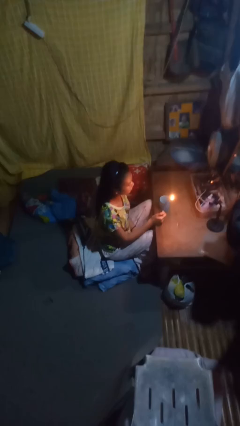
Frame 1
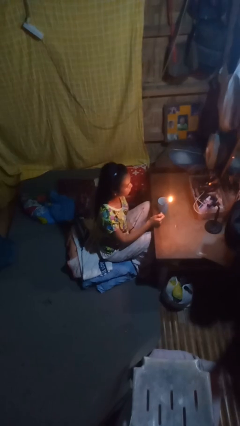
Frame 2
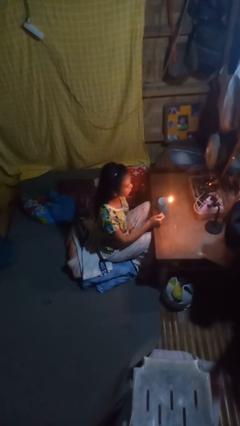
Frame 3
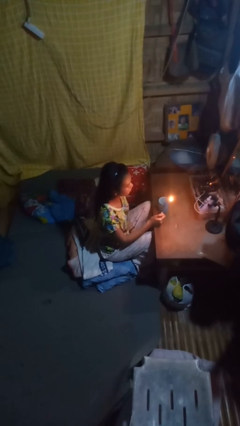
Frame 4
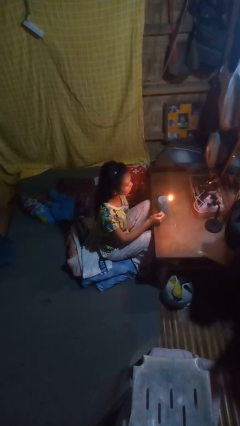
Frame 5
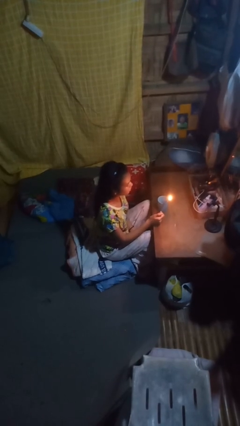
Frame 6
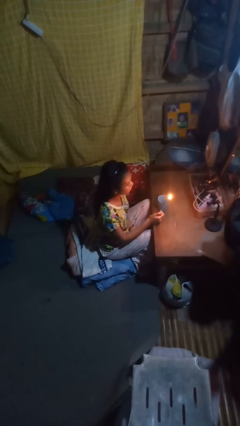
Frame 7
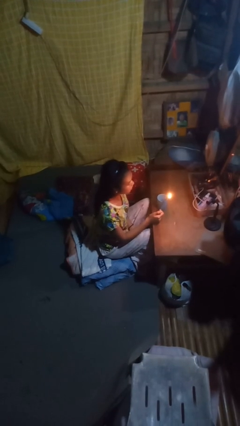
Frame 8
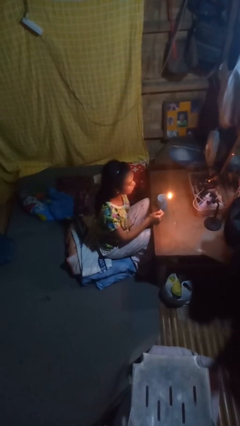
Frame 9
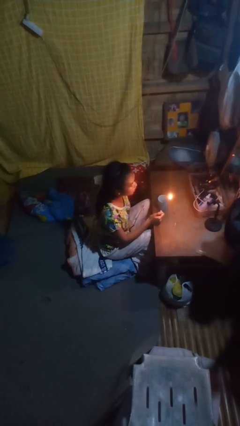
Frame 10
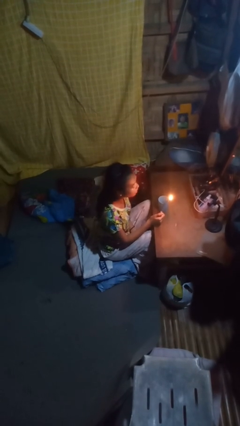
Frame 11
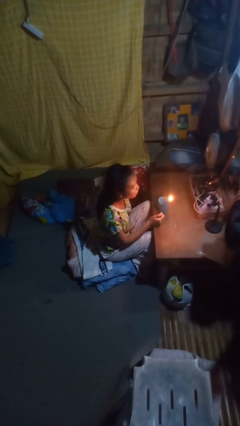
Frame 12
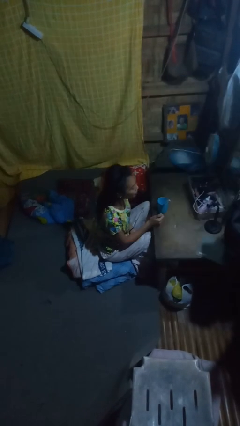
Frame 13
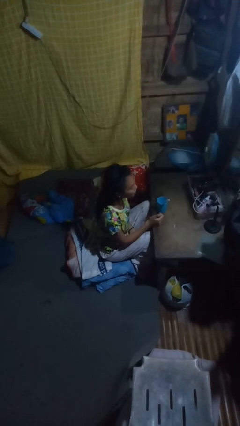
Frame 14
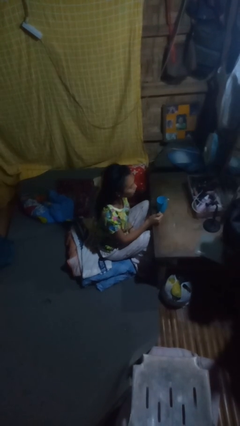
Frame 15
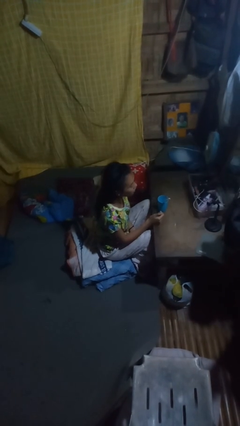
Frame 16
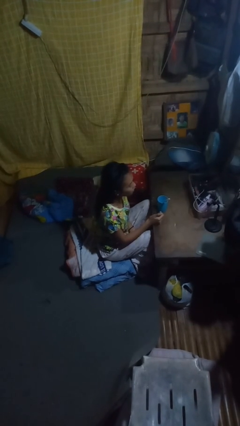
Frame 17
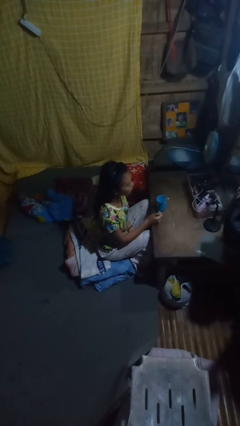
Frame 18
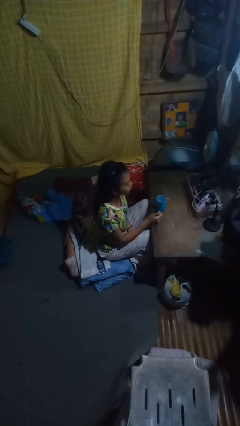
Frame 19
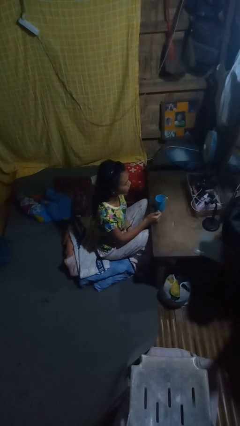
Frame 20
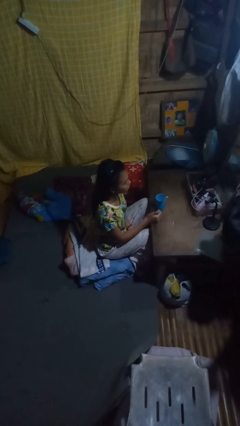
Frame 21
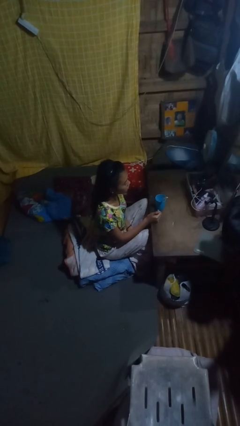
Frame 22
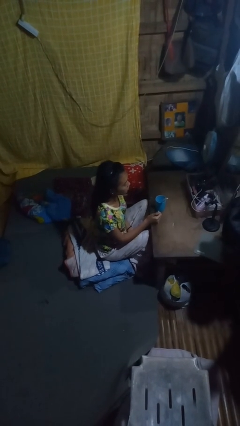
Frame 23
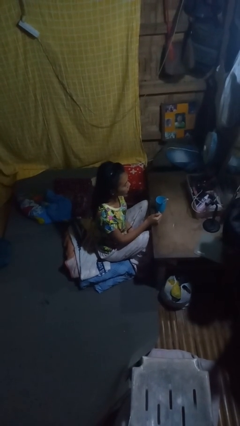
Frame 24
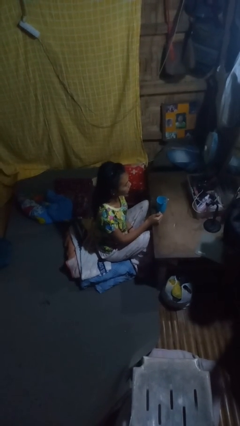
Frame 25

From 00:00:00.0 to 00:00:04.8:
person extinguishes candle

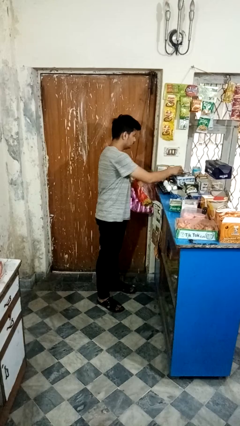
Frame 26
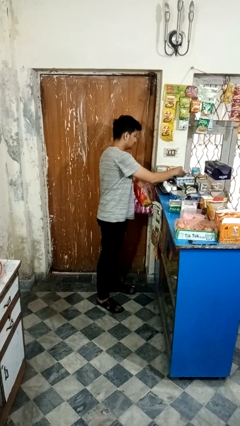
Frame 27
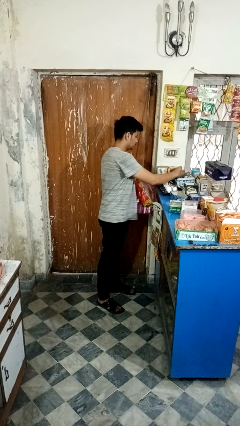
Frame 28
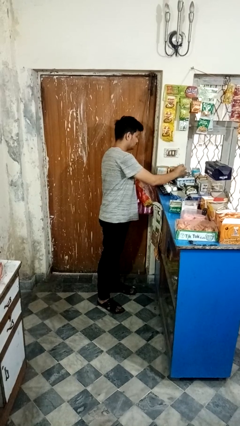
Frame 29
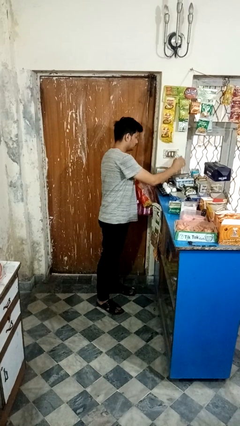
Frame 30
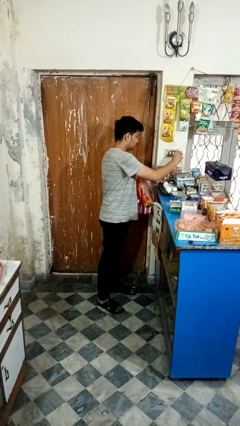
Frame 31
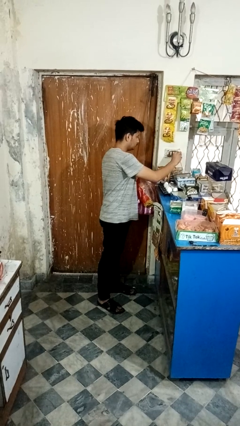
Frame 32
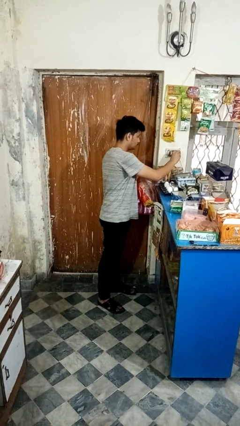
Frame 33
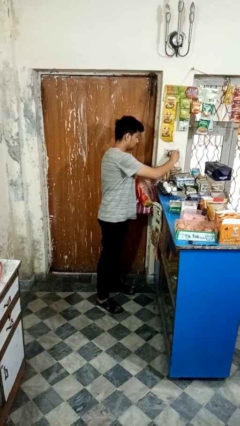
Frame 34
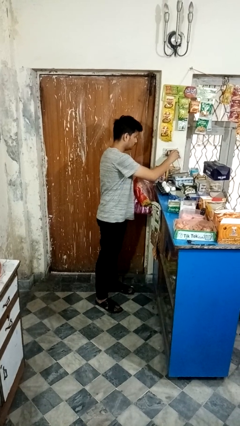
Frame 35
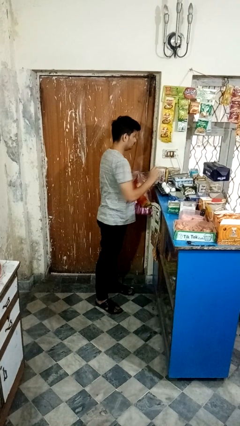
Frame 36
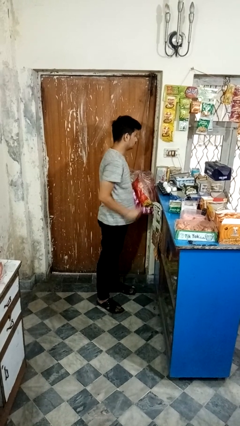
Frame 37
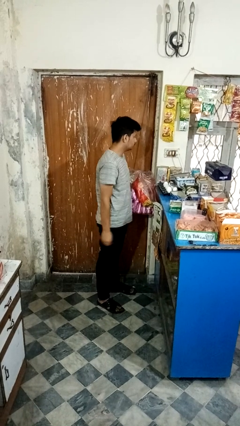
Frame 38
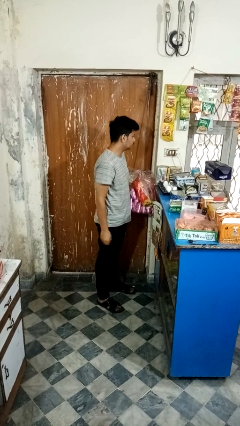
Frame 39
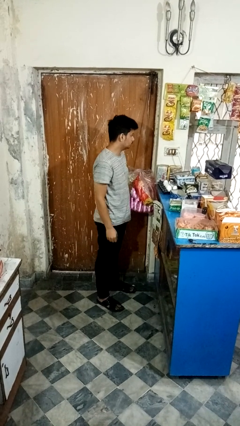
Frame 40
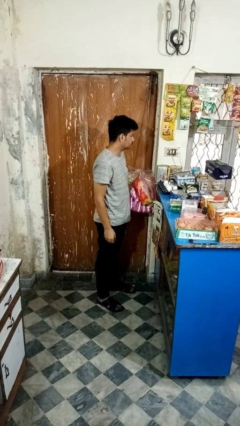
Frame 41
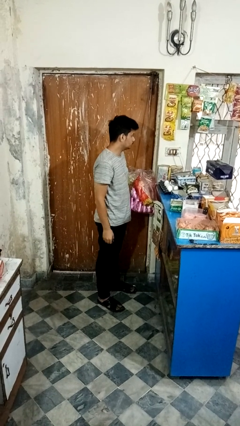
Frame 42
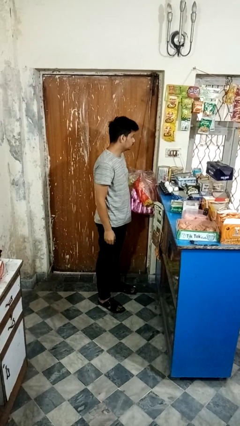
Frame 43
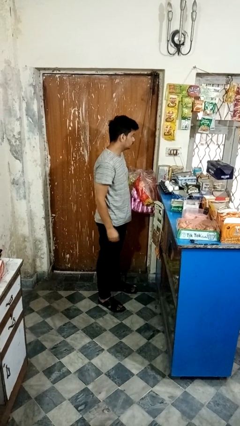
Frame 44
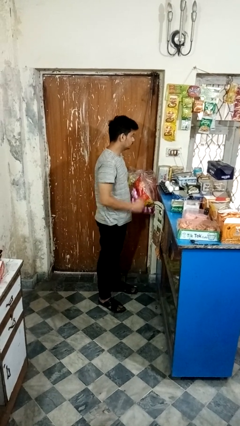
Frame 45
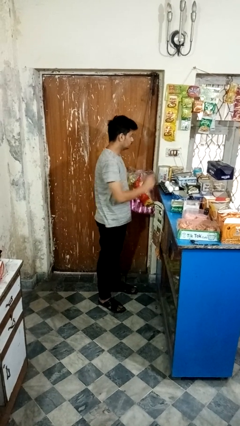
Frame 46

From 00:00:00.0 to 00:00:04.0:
person plugs into electrical socket

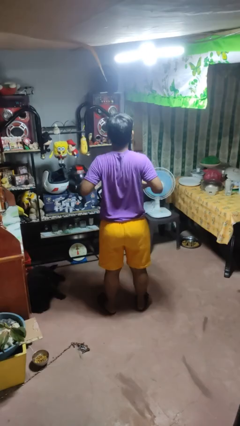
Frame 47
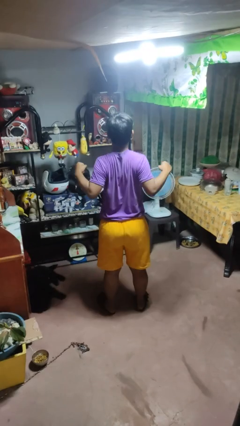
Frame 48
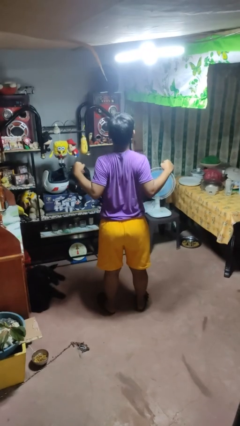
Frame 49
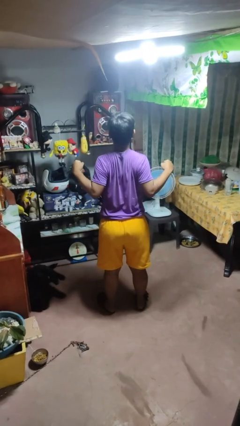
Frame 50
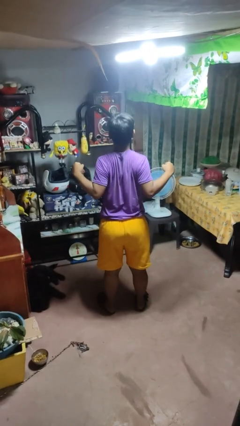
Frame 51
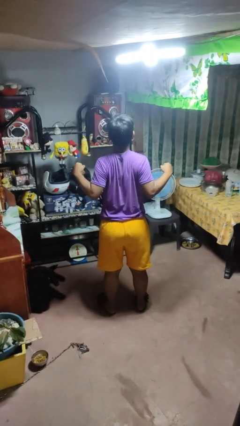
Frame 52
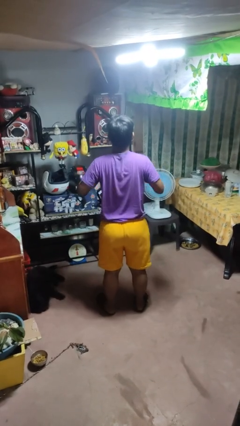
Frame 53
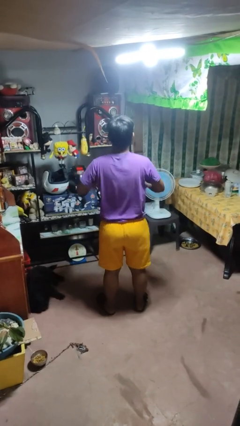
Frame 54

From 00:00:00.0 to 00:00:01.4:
person stretches back

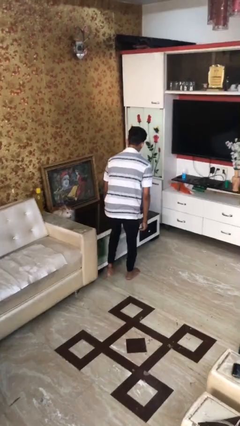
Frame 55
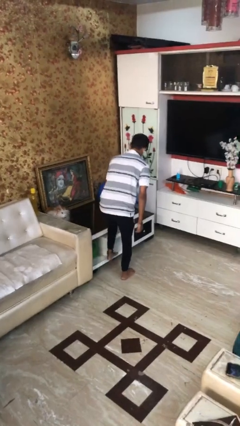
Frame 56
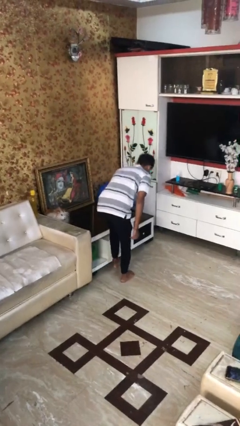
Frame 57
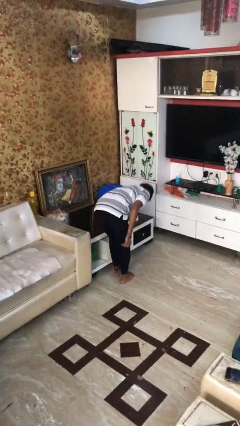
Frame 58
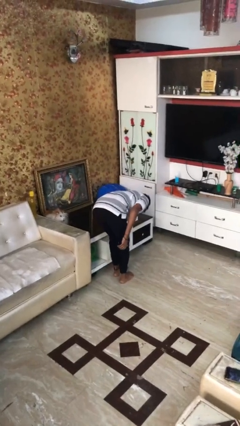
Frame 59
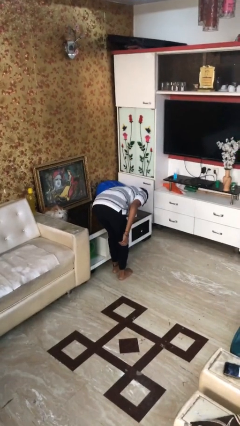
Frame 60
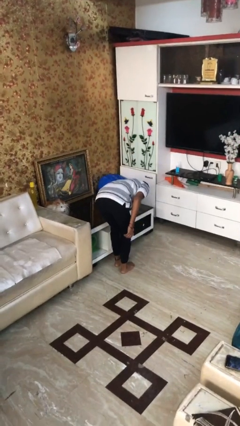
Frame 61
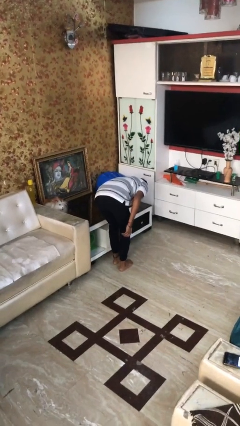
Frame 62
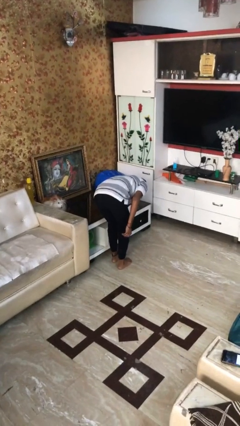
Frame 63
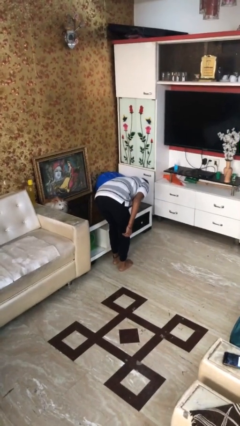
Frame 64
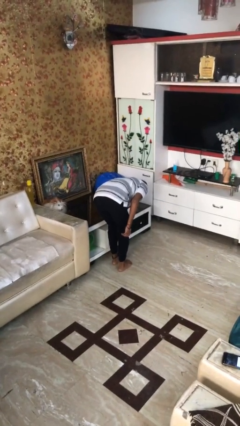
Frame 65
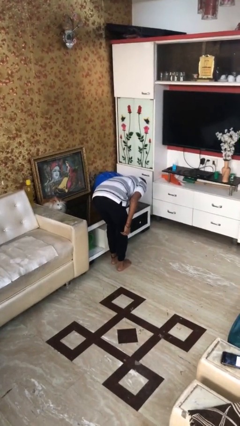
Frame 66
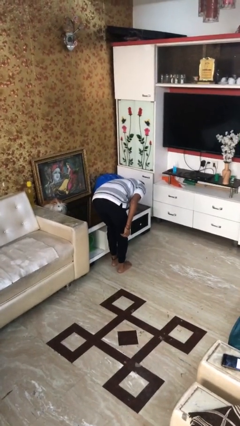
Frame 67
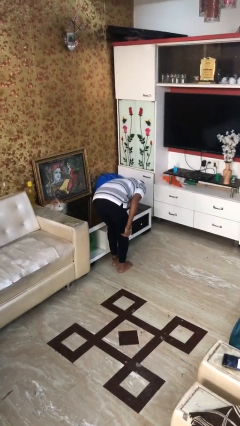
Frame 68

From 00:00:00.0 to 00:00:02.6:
person bumps into table

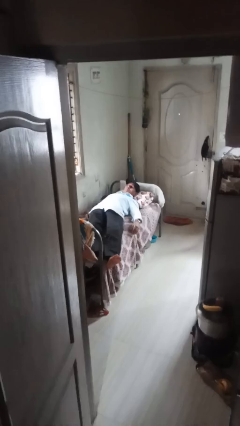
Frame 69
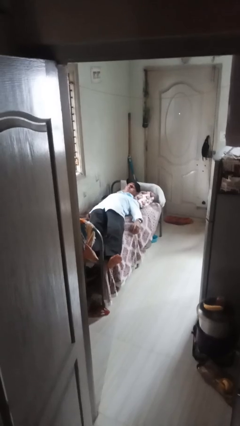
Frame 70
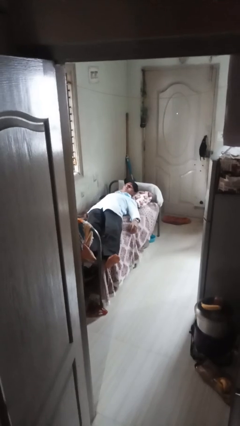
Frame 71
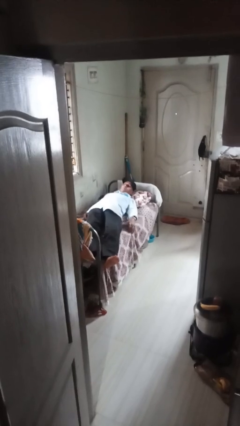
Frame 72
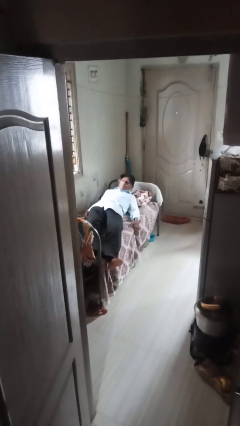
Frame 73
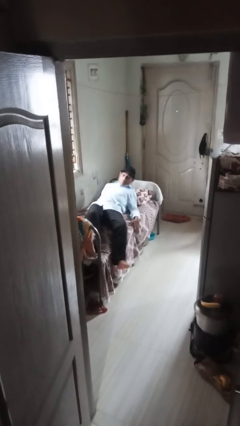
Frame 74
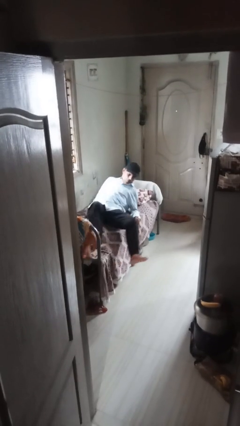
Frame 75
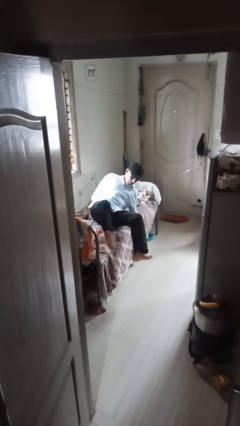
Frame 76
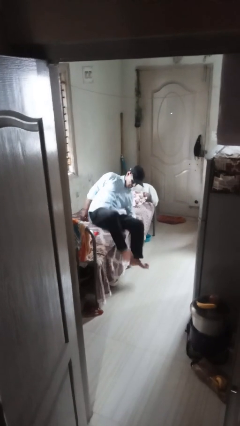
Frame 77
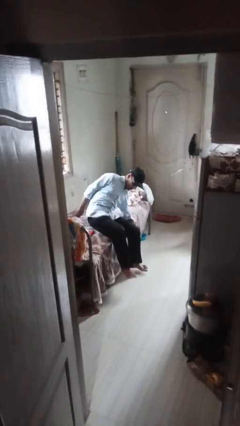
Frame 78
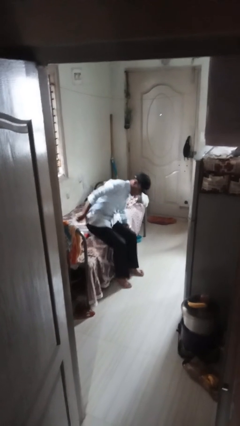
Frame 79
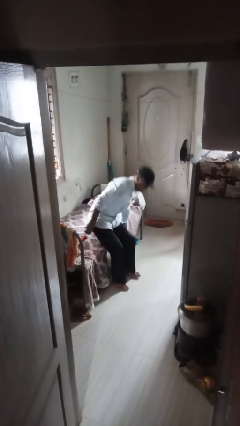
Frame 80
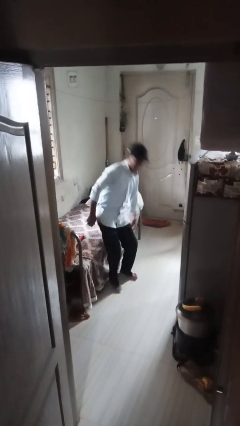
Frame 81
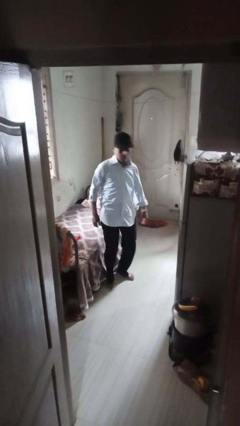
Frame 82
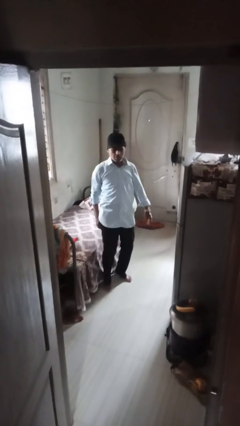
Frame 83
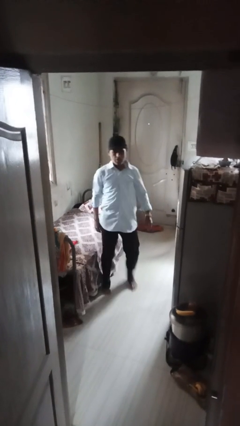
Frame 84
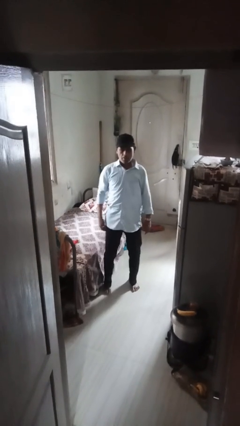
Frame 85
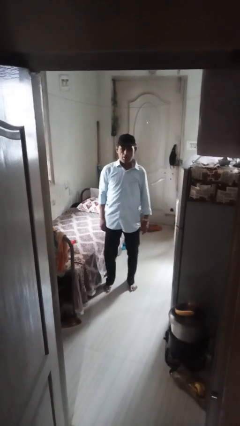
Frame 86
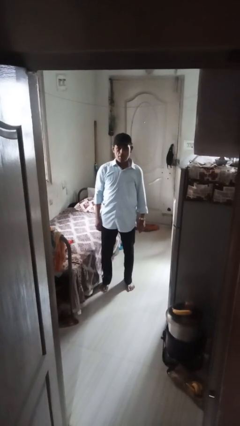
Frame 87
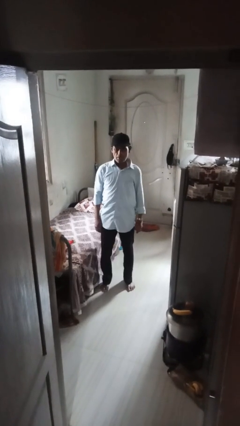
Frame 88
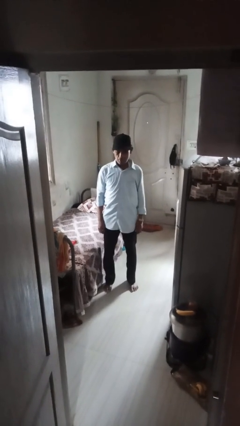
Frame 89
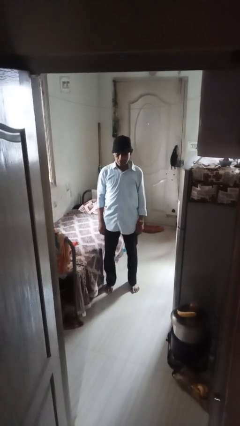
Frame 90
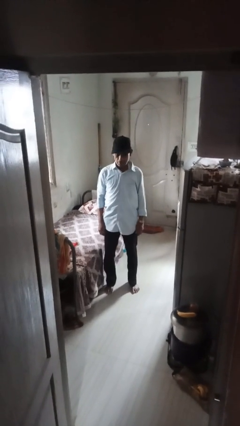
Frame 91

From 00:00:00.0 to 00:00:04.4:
person stands up

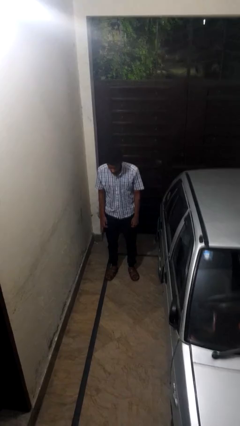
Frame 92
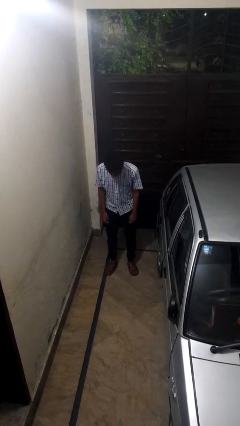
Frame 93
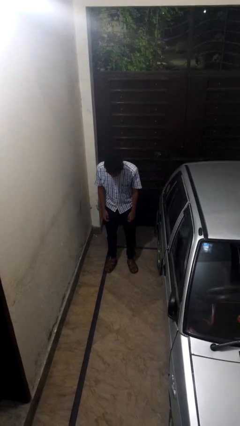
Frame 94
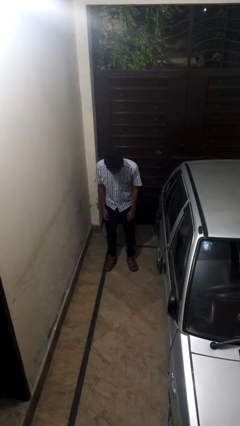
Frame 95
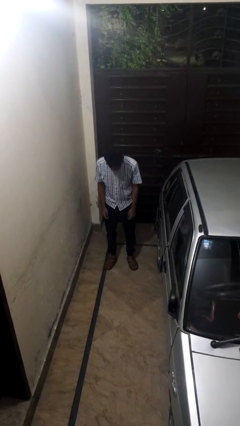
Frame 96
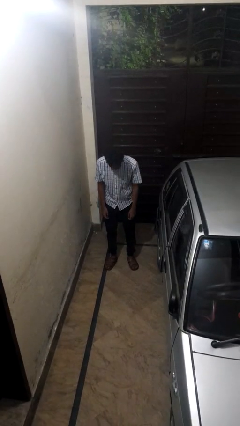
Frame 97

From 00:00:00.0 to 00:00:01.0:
person bows
